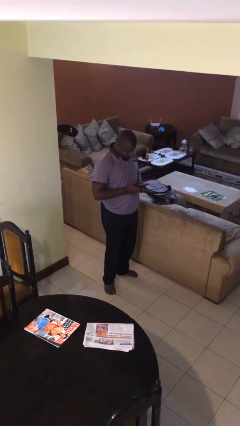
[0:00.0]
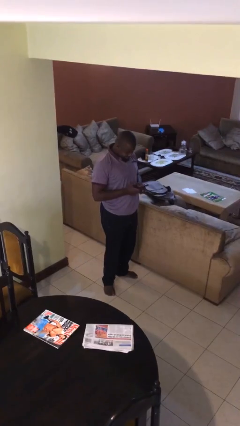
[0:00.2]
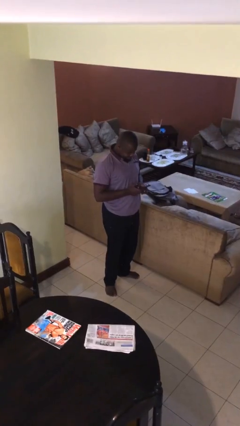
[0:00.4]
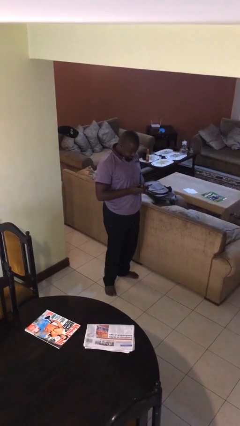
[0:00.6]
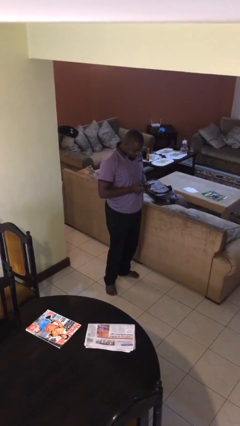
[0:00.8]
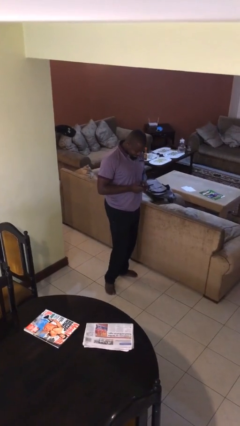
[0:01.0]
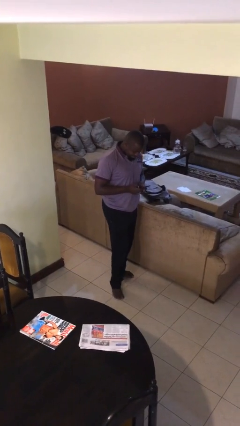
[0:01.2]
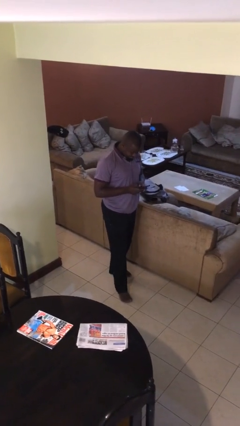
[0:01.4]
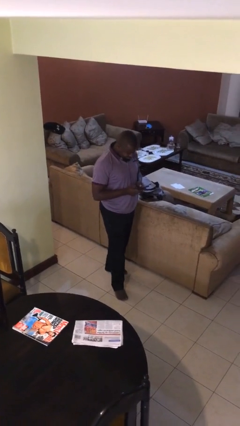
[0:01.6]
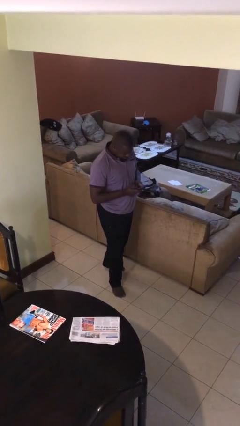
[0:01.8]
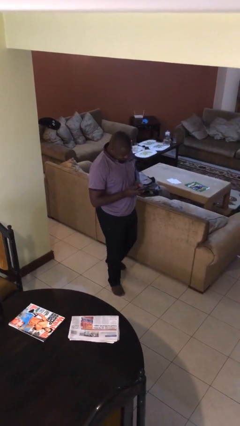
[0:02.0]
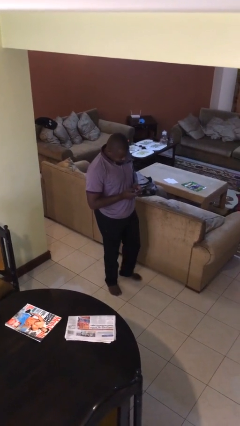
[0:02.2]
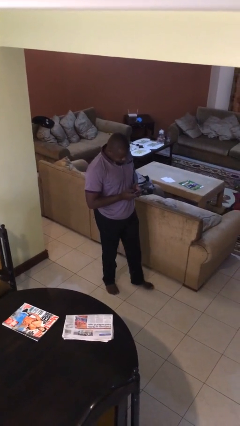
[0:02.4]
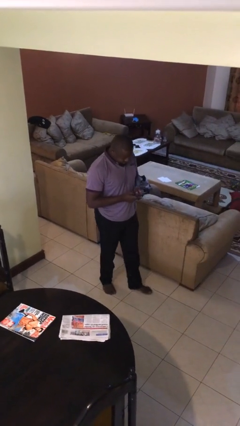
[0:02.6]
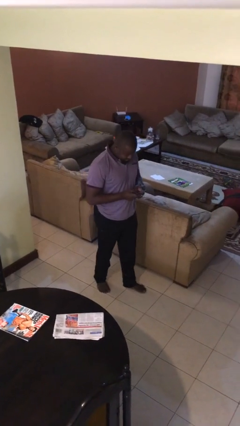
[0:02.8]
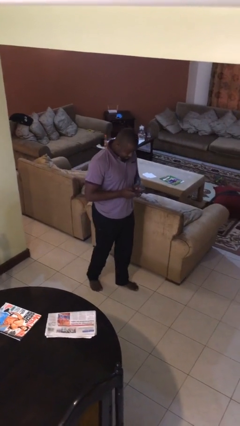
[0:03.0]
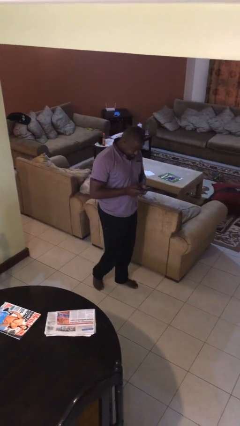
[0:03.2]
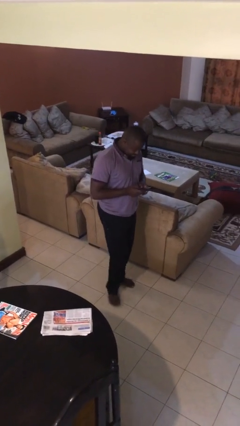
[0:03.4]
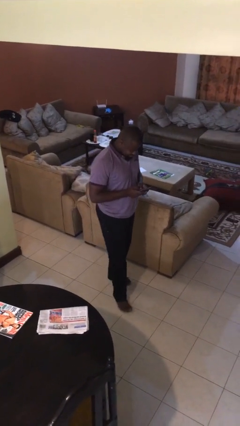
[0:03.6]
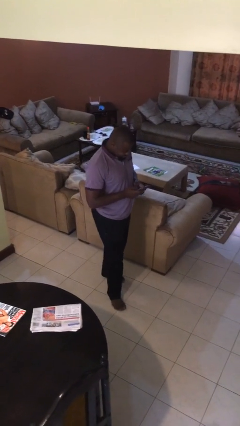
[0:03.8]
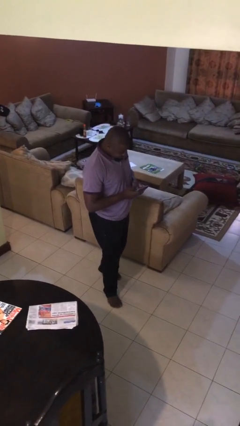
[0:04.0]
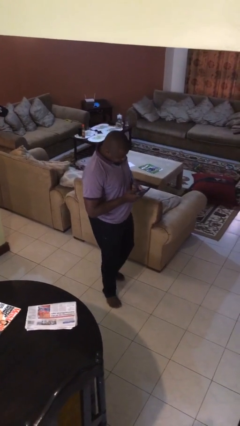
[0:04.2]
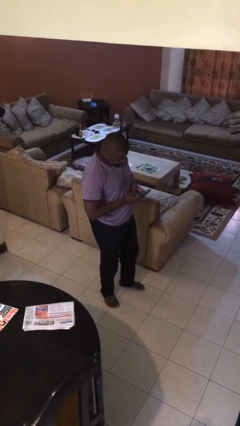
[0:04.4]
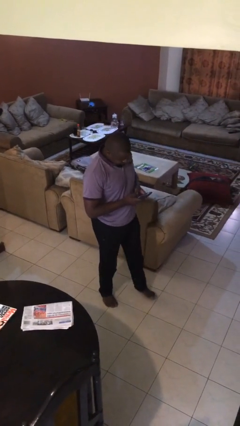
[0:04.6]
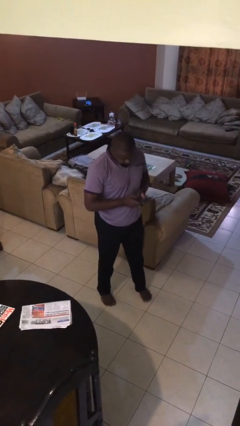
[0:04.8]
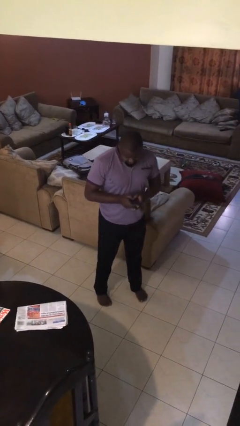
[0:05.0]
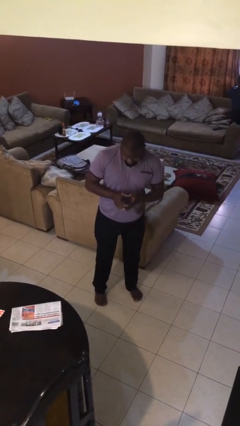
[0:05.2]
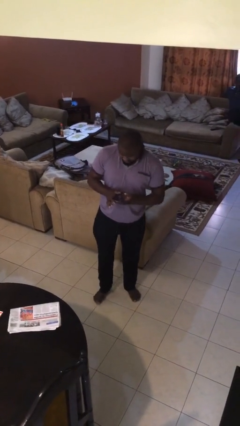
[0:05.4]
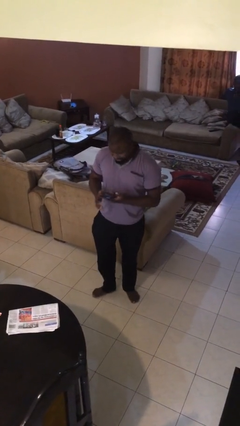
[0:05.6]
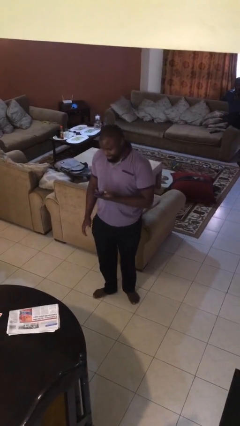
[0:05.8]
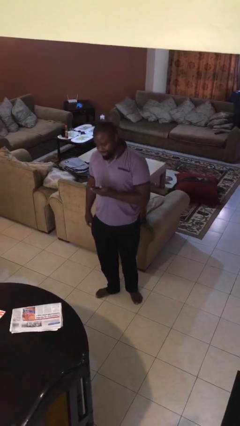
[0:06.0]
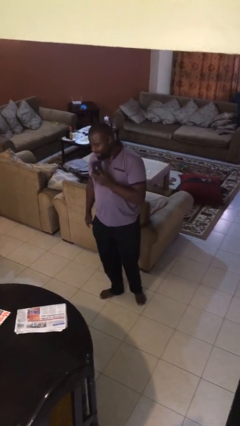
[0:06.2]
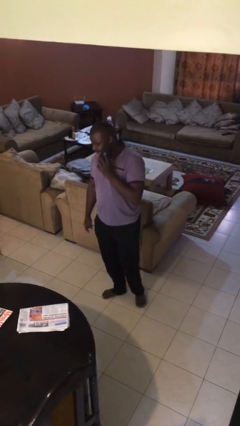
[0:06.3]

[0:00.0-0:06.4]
person texts on phone

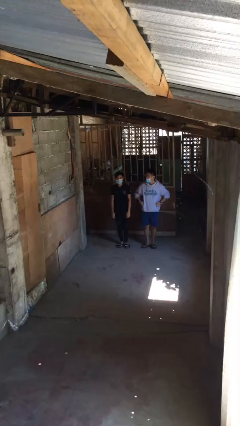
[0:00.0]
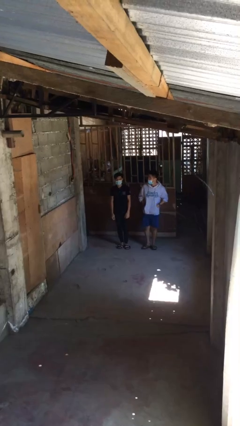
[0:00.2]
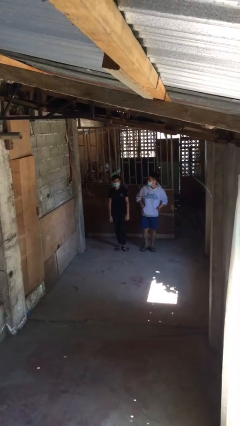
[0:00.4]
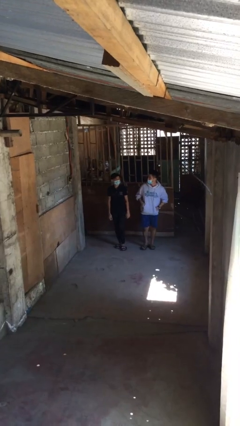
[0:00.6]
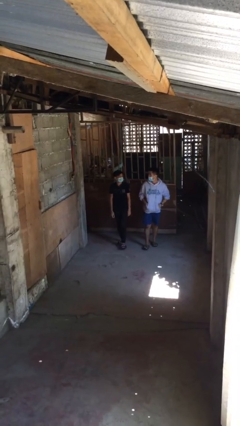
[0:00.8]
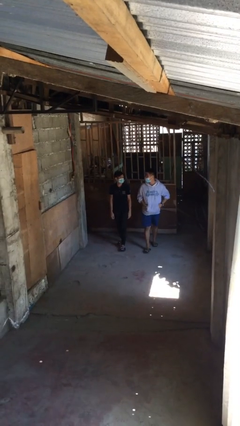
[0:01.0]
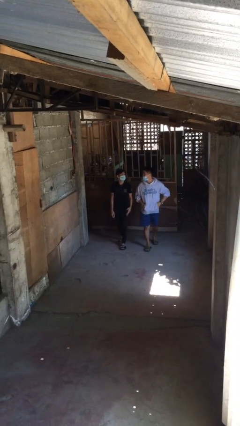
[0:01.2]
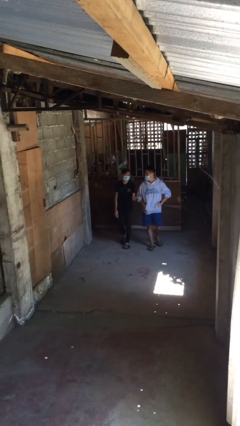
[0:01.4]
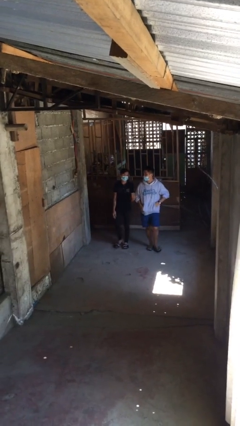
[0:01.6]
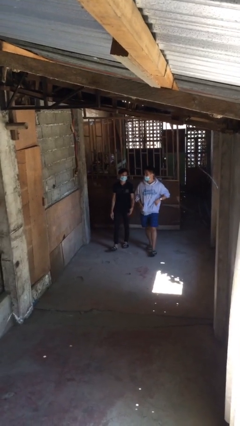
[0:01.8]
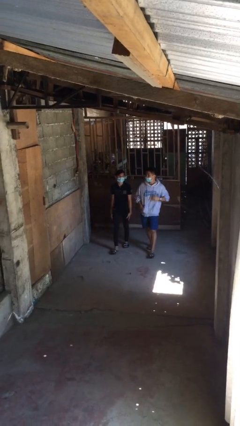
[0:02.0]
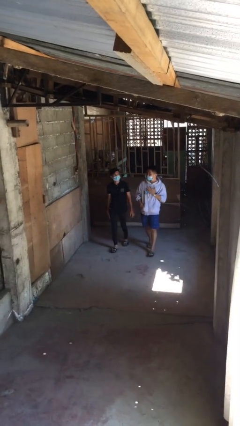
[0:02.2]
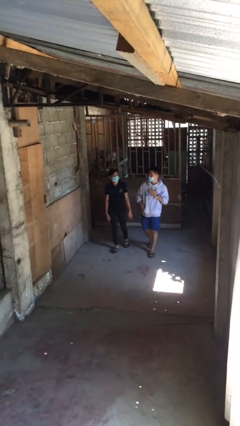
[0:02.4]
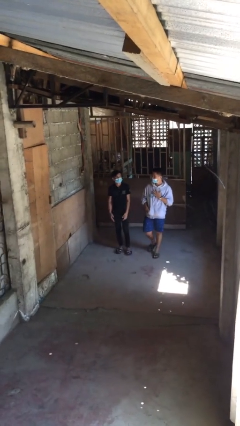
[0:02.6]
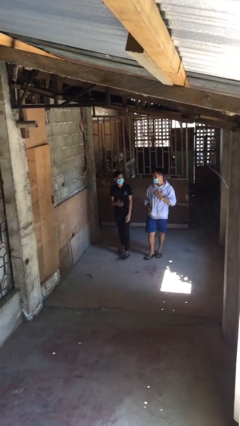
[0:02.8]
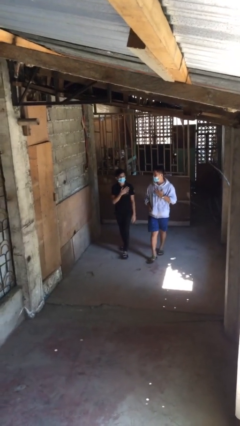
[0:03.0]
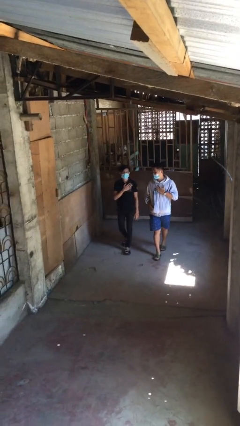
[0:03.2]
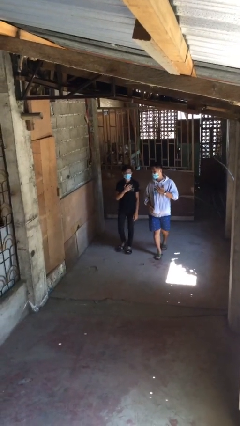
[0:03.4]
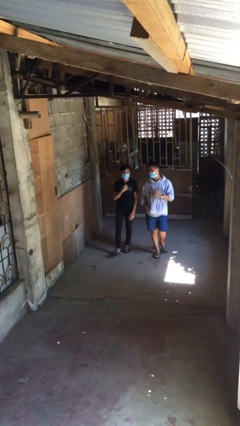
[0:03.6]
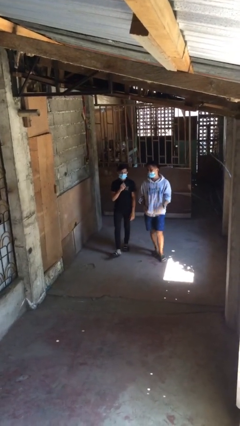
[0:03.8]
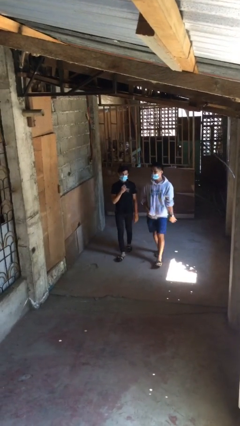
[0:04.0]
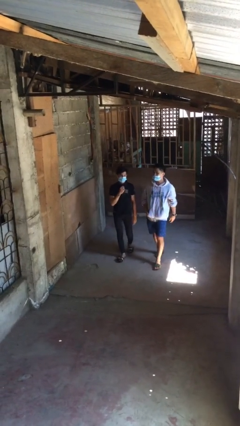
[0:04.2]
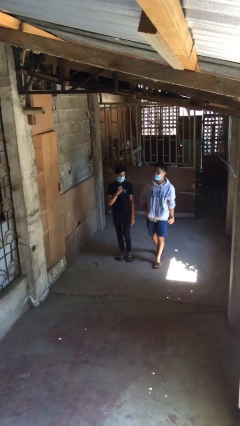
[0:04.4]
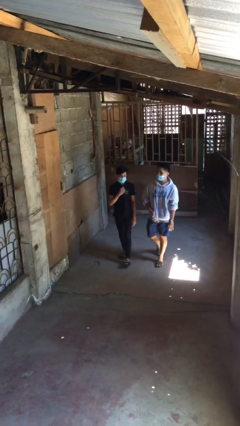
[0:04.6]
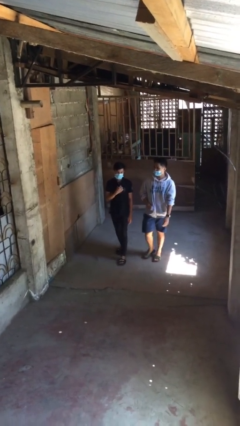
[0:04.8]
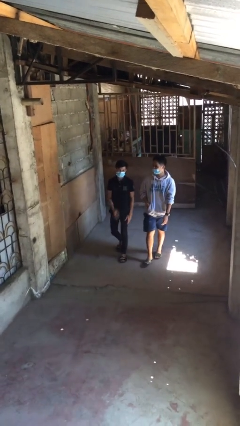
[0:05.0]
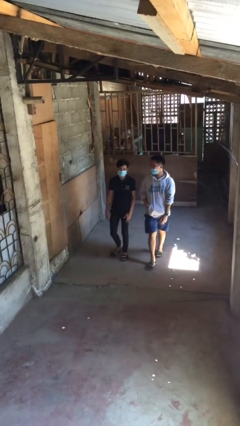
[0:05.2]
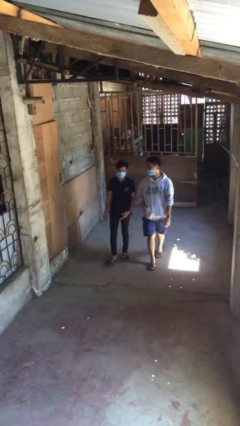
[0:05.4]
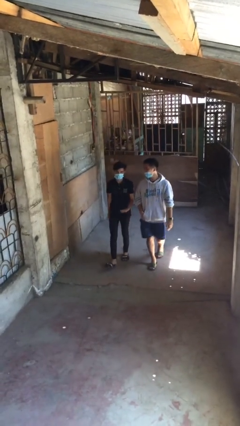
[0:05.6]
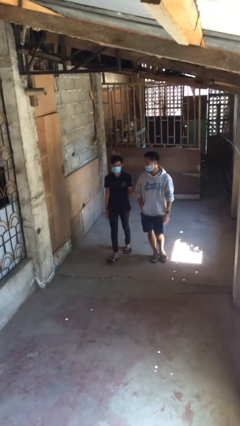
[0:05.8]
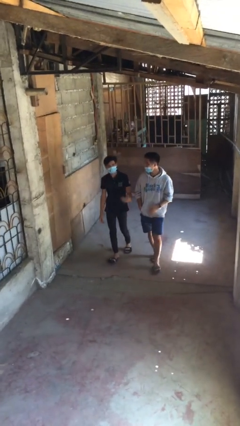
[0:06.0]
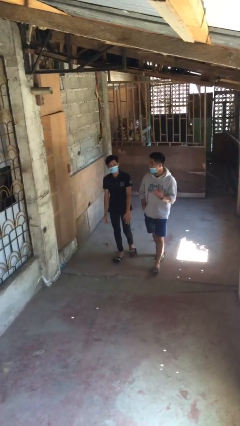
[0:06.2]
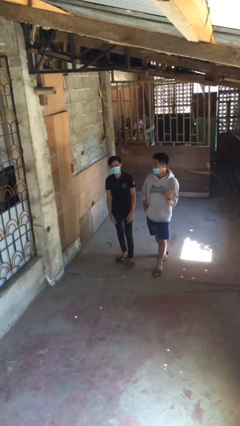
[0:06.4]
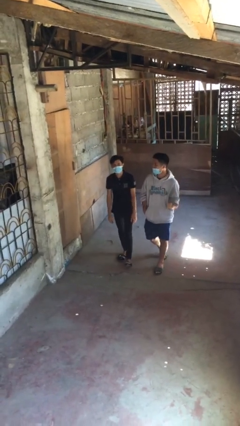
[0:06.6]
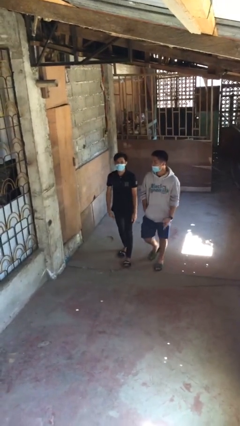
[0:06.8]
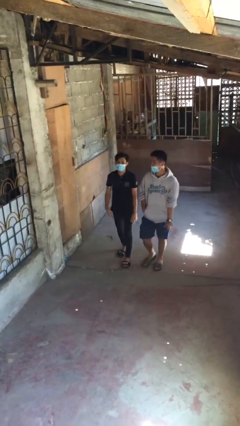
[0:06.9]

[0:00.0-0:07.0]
person talks to person

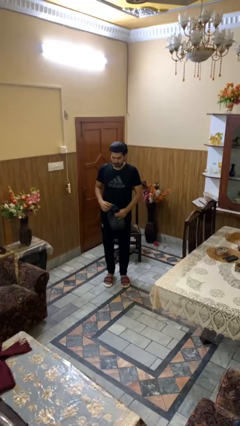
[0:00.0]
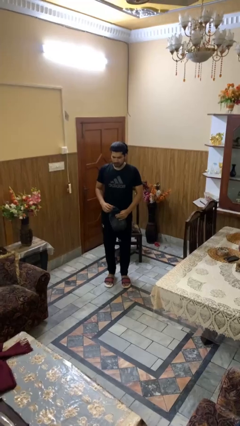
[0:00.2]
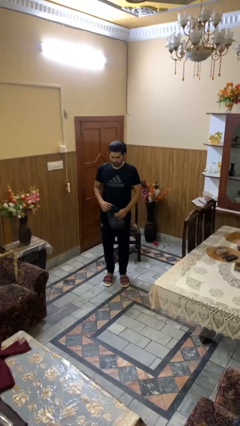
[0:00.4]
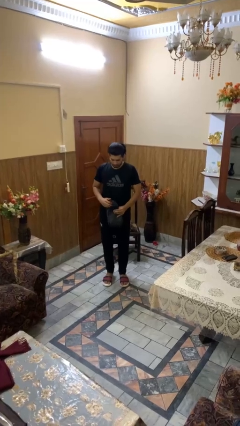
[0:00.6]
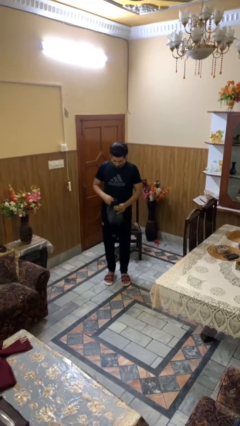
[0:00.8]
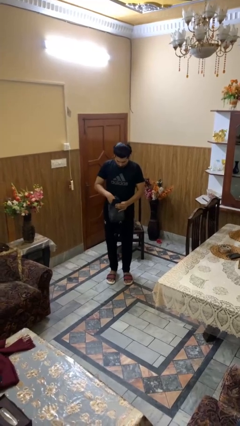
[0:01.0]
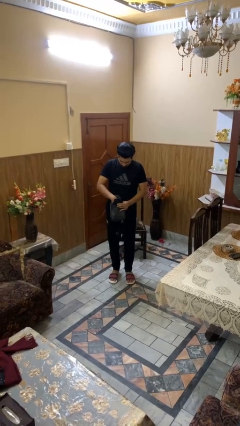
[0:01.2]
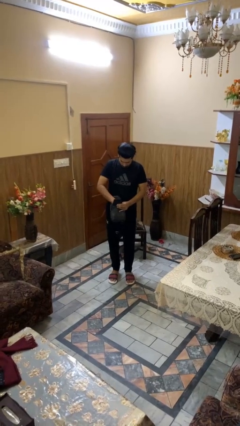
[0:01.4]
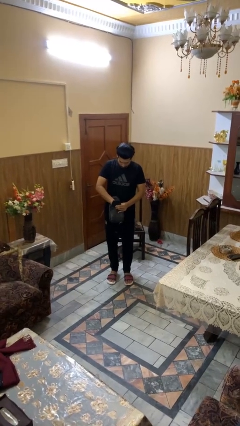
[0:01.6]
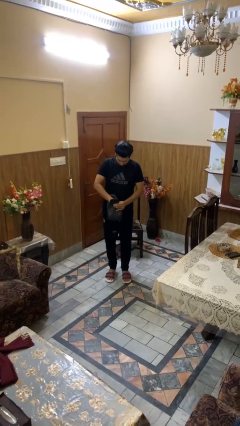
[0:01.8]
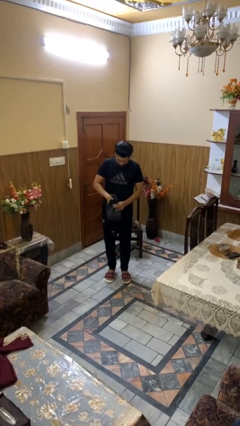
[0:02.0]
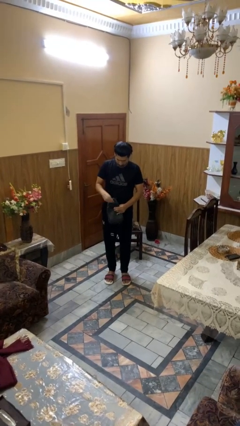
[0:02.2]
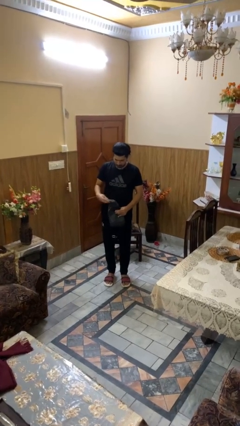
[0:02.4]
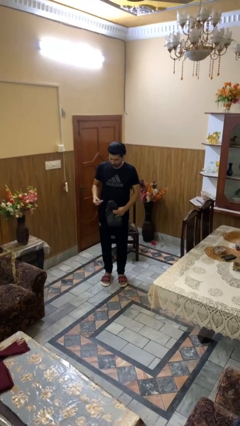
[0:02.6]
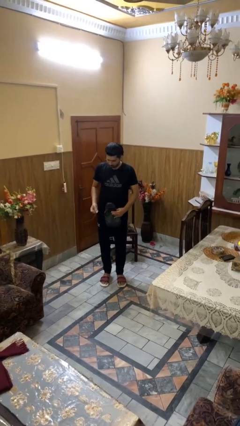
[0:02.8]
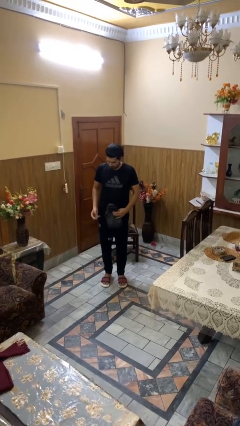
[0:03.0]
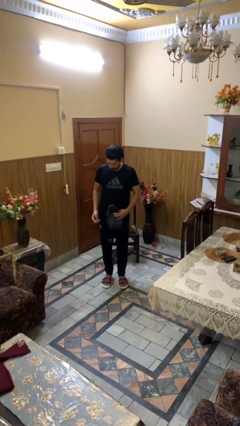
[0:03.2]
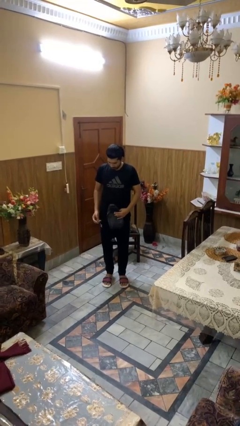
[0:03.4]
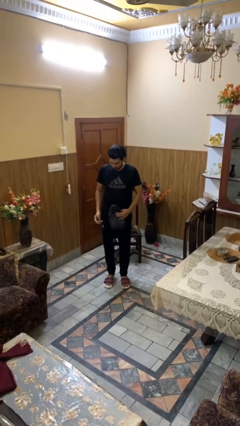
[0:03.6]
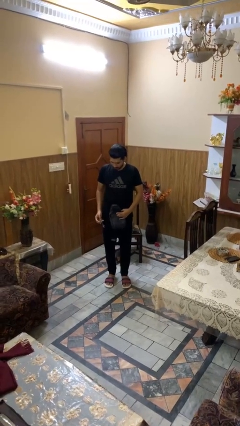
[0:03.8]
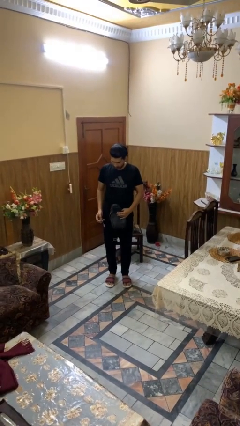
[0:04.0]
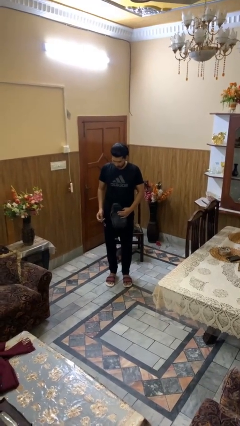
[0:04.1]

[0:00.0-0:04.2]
person takes object from purse

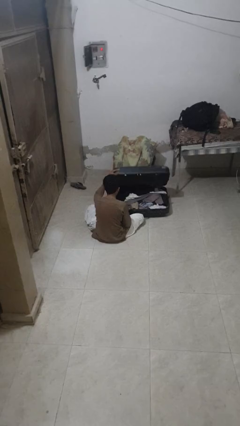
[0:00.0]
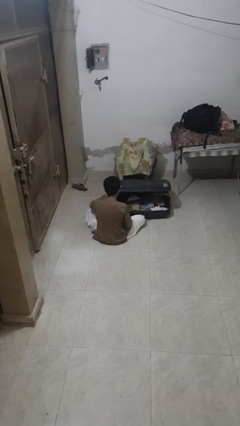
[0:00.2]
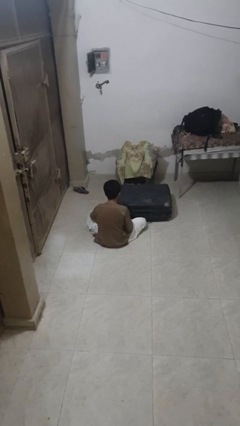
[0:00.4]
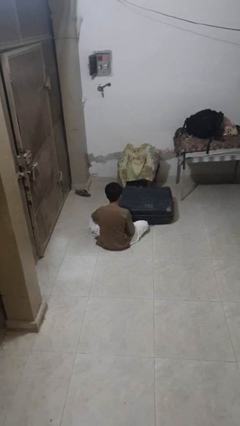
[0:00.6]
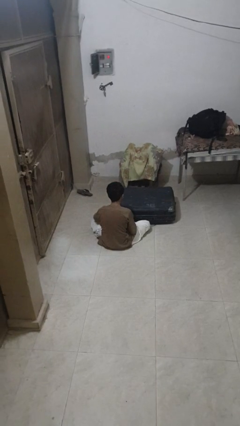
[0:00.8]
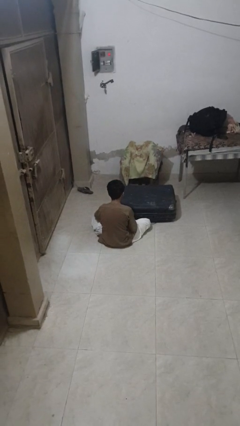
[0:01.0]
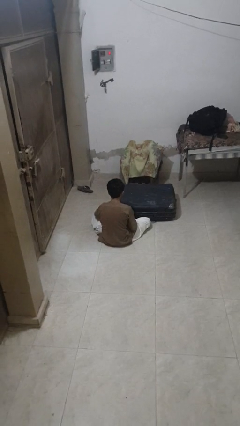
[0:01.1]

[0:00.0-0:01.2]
person closes suitcase
